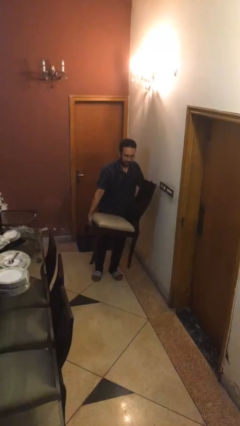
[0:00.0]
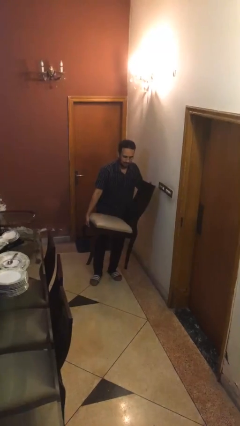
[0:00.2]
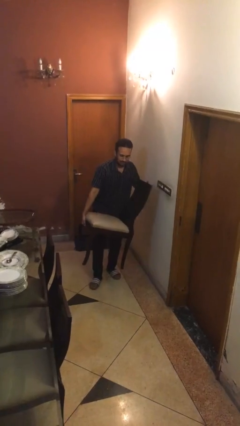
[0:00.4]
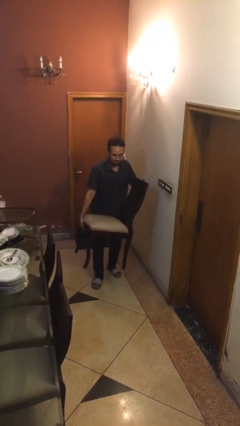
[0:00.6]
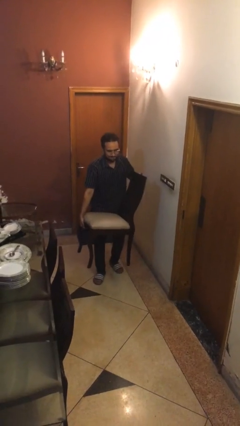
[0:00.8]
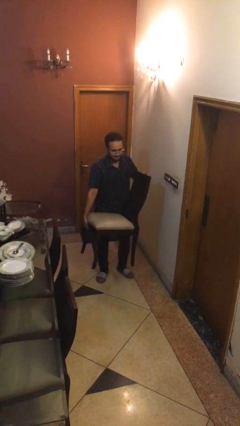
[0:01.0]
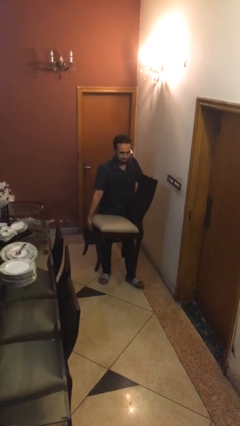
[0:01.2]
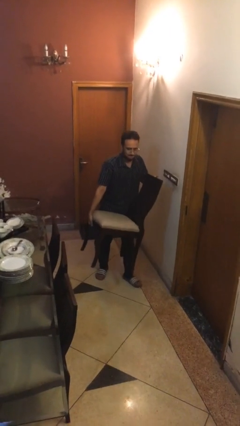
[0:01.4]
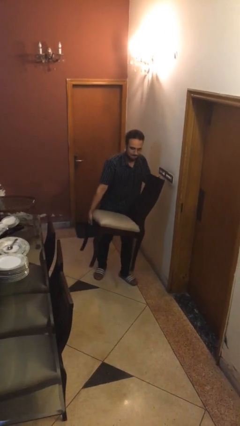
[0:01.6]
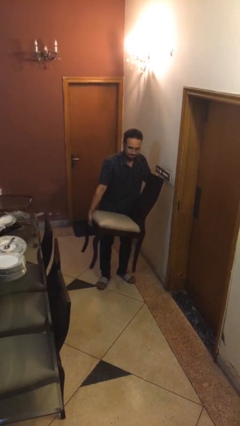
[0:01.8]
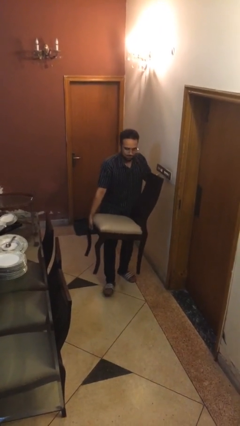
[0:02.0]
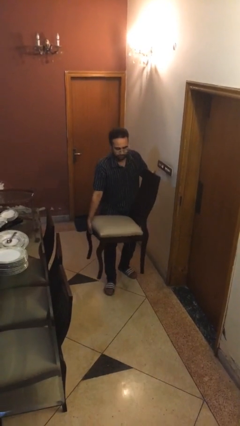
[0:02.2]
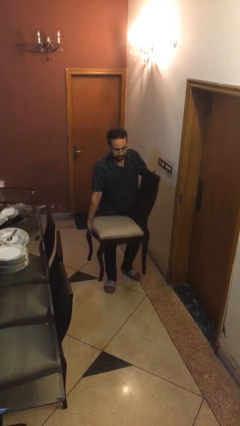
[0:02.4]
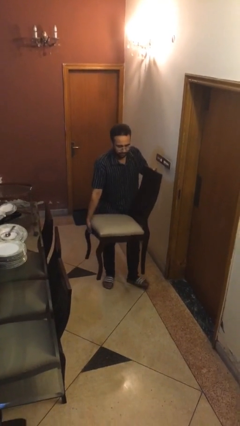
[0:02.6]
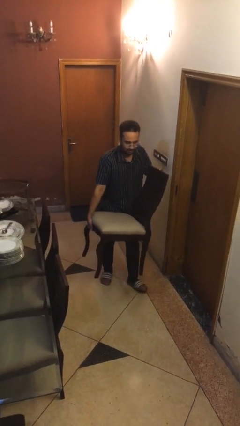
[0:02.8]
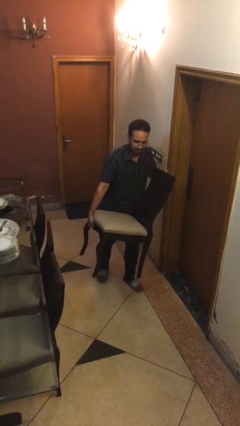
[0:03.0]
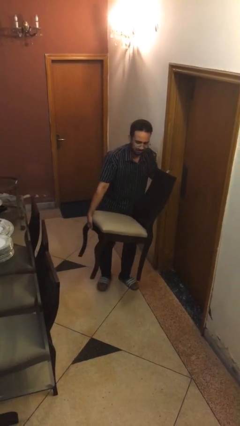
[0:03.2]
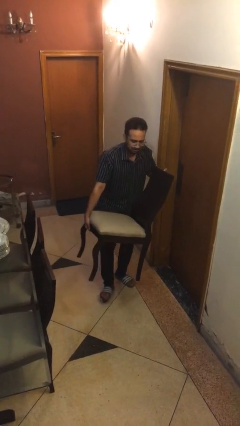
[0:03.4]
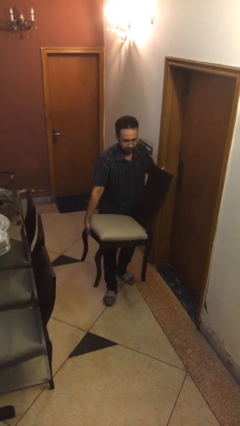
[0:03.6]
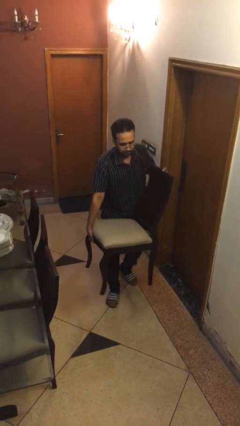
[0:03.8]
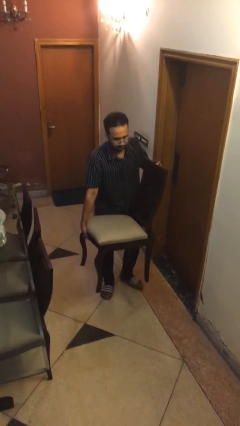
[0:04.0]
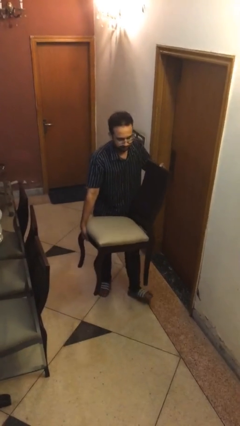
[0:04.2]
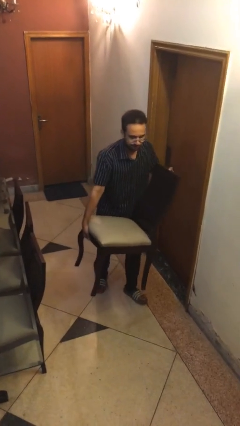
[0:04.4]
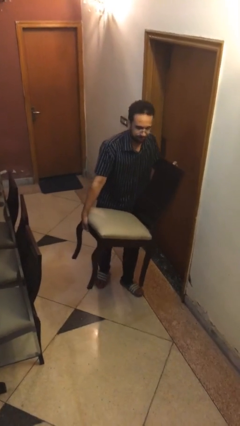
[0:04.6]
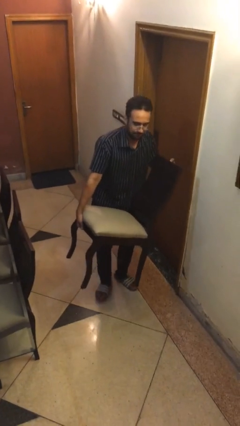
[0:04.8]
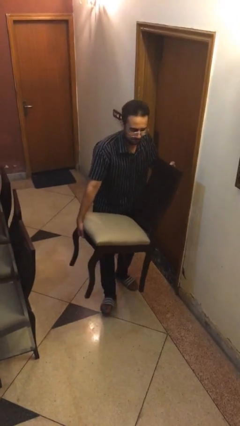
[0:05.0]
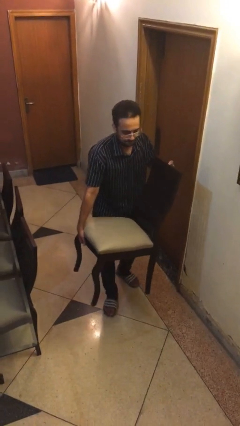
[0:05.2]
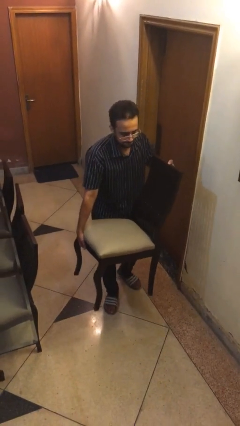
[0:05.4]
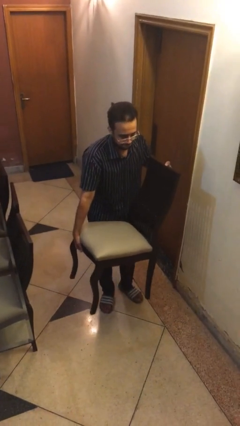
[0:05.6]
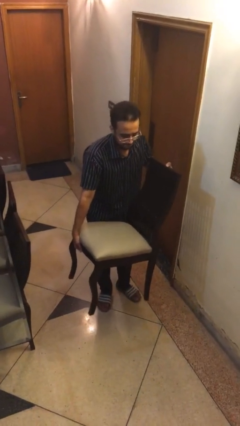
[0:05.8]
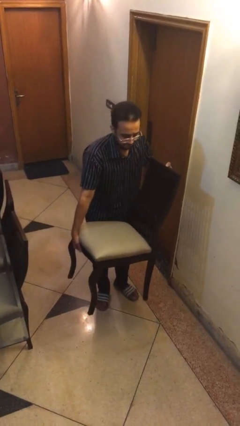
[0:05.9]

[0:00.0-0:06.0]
person carries heavy object

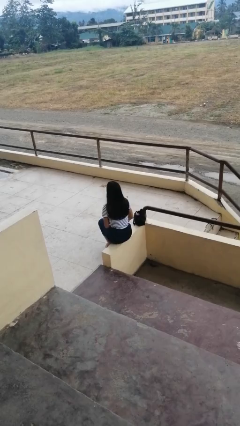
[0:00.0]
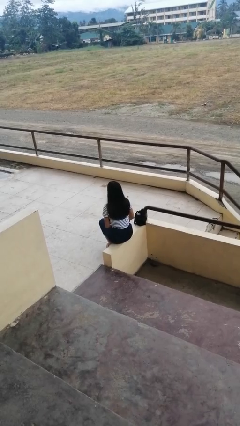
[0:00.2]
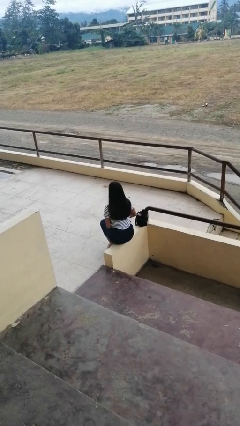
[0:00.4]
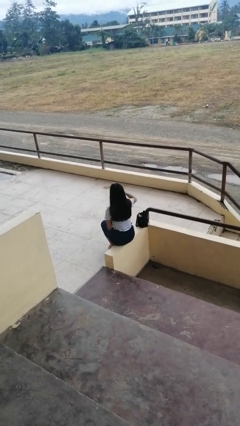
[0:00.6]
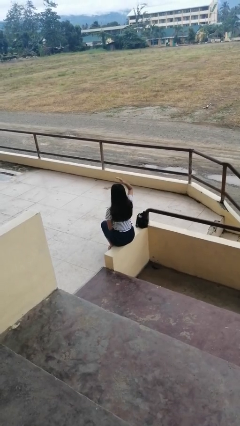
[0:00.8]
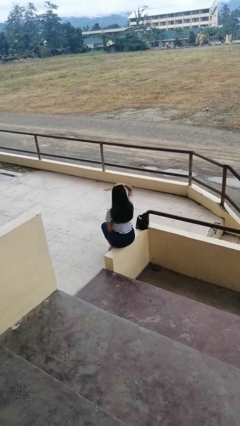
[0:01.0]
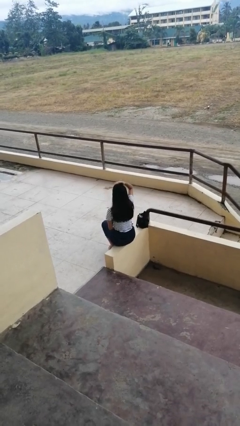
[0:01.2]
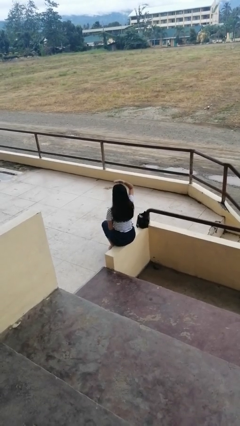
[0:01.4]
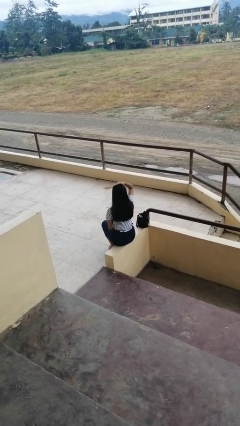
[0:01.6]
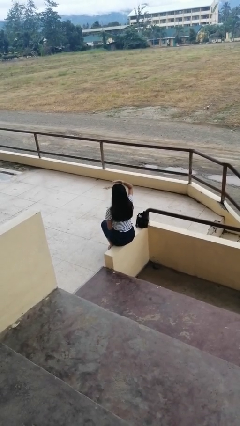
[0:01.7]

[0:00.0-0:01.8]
person pats head

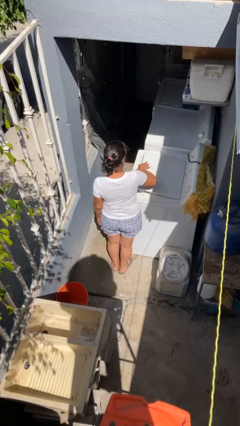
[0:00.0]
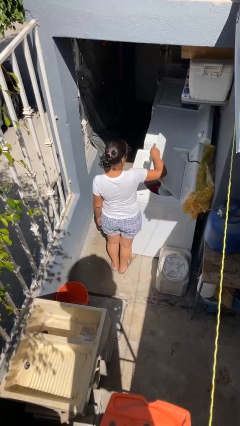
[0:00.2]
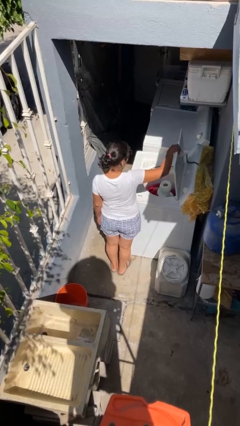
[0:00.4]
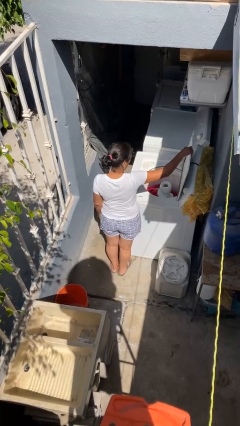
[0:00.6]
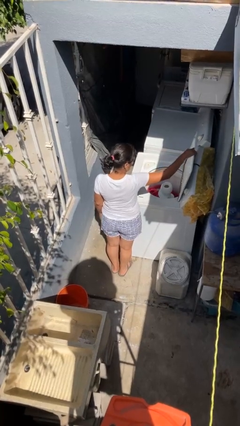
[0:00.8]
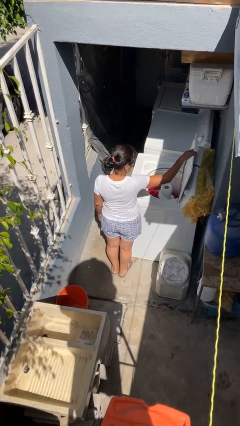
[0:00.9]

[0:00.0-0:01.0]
person opens clothes washer

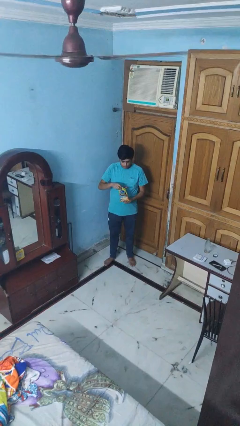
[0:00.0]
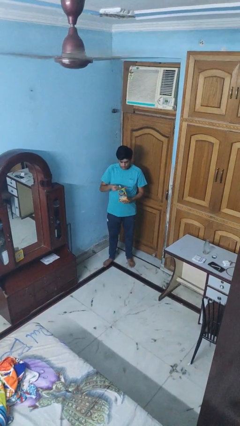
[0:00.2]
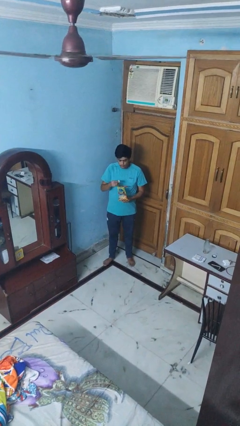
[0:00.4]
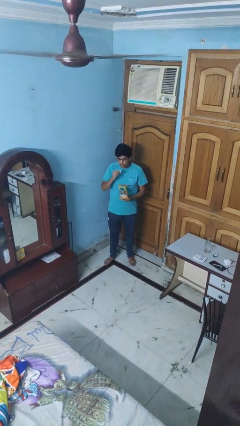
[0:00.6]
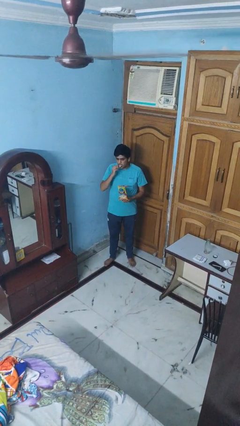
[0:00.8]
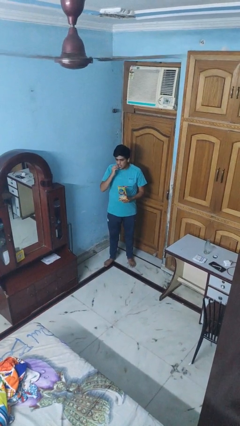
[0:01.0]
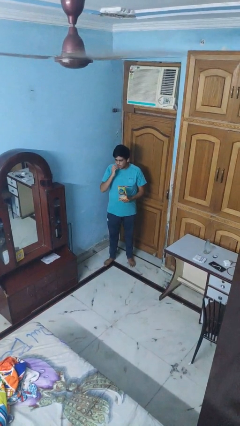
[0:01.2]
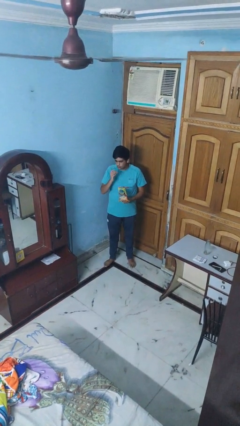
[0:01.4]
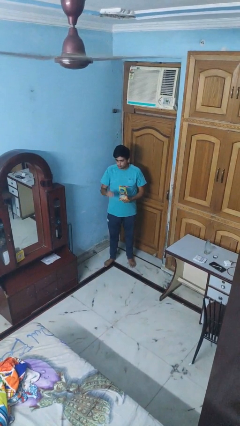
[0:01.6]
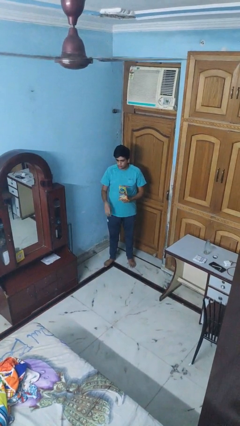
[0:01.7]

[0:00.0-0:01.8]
person eats snack from bag

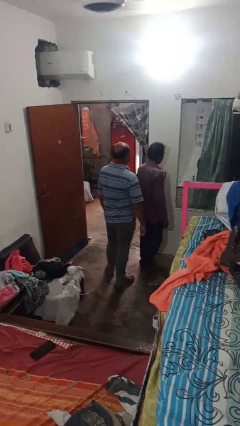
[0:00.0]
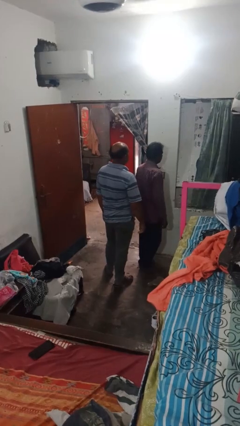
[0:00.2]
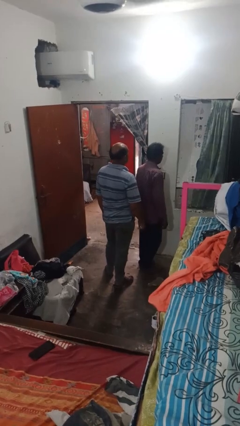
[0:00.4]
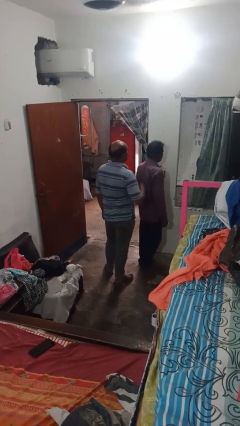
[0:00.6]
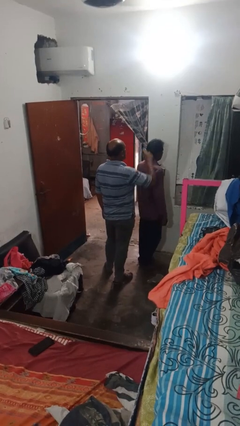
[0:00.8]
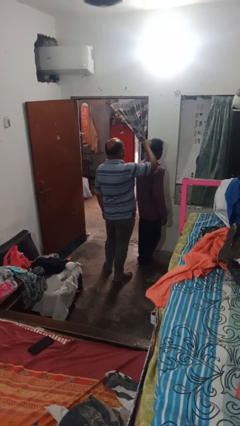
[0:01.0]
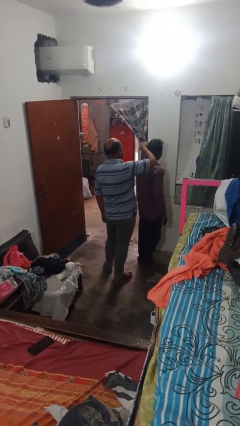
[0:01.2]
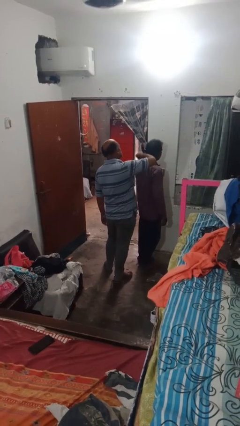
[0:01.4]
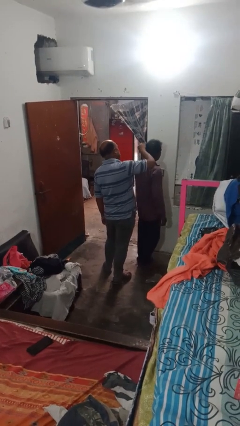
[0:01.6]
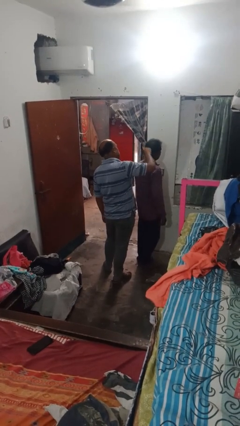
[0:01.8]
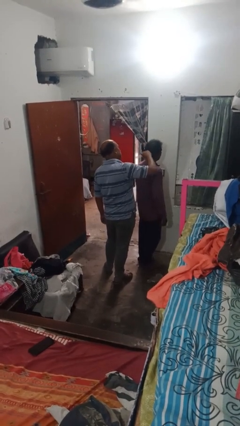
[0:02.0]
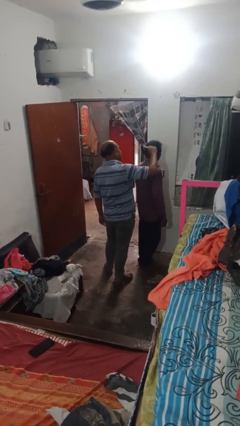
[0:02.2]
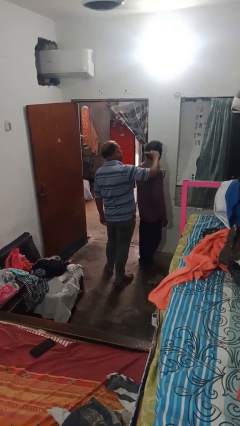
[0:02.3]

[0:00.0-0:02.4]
person brushes hair of person

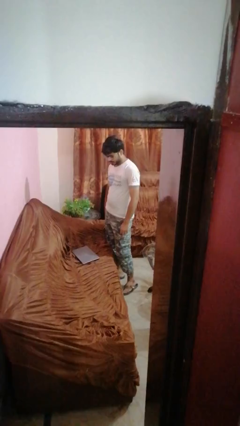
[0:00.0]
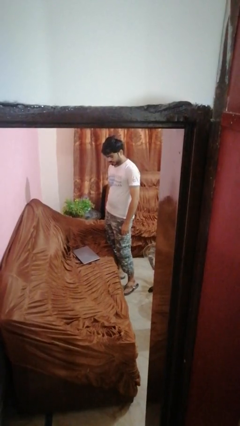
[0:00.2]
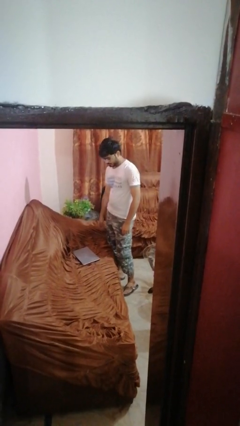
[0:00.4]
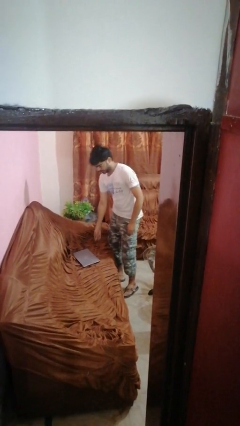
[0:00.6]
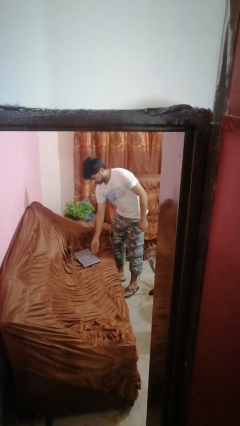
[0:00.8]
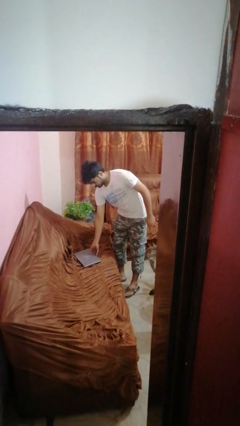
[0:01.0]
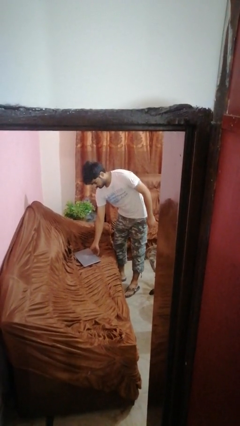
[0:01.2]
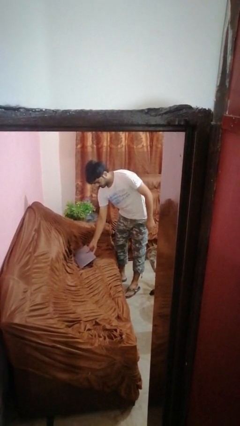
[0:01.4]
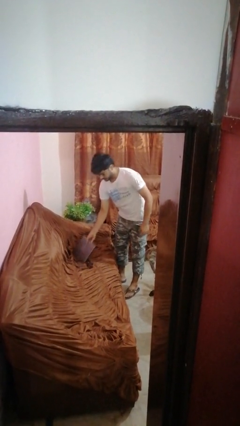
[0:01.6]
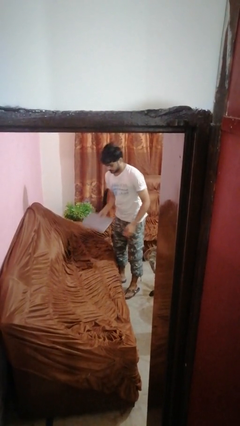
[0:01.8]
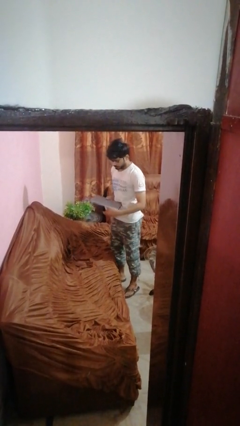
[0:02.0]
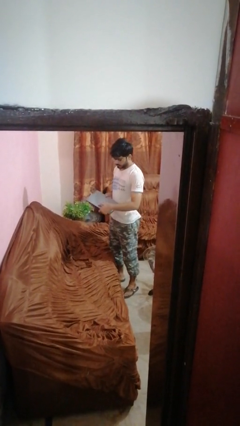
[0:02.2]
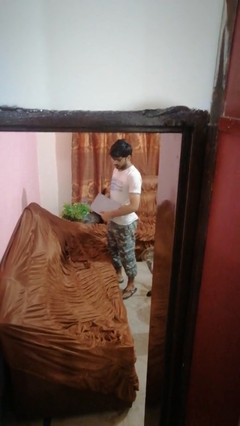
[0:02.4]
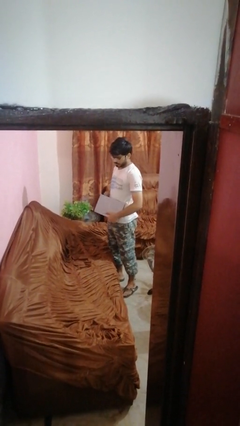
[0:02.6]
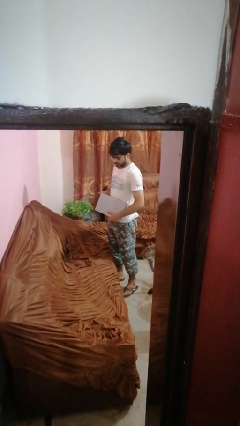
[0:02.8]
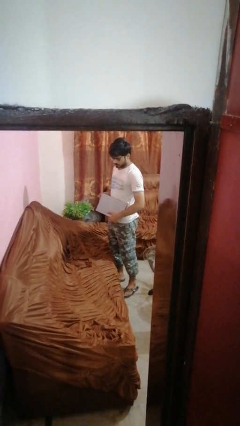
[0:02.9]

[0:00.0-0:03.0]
person picks up object from couch

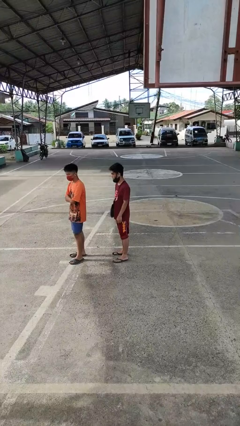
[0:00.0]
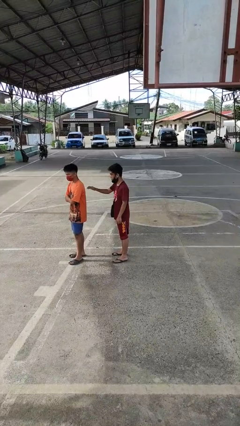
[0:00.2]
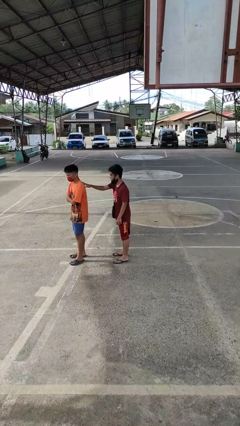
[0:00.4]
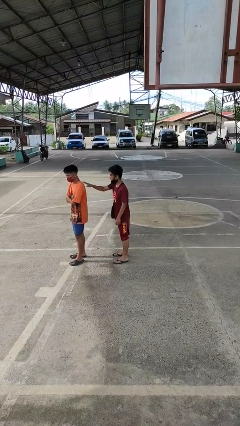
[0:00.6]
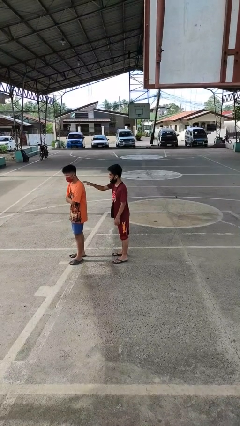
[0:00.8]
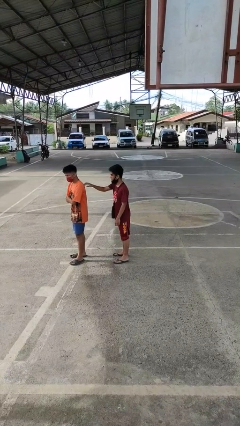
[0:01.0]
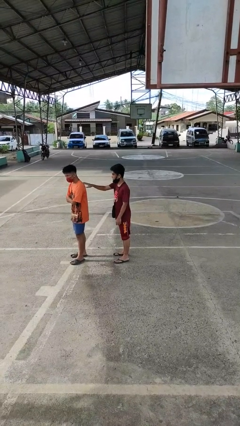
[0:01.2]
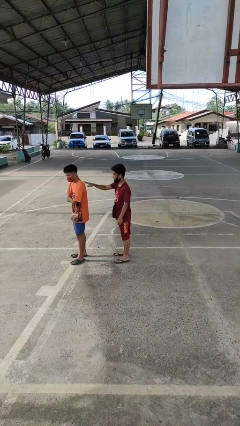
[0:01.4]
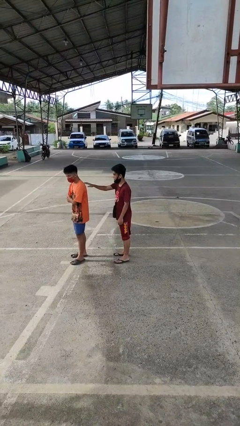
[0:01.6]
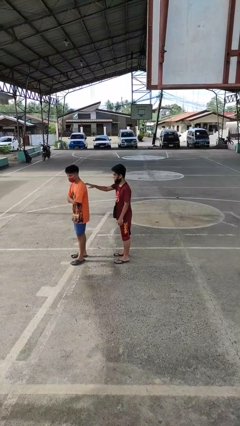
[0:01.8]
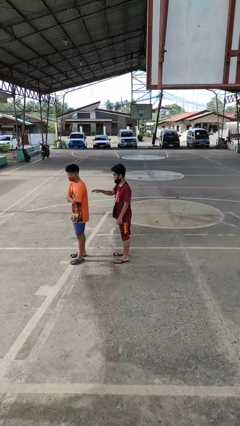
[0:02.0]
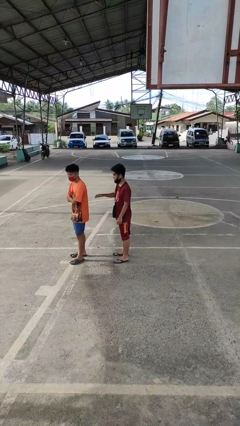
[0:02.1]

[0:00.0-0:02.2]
person touches back of person
